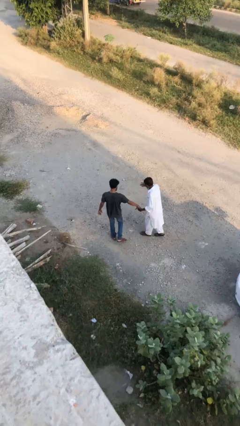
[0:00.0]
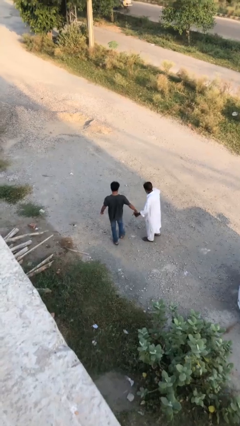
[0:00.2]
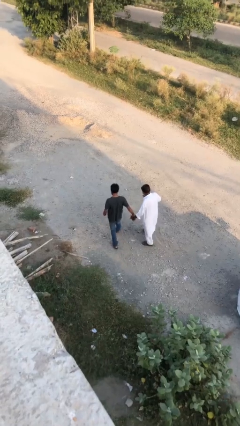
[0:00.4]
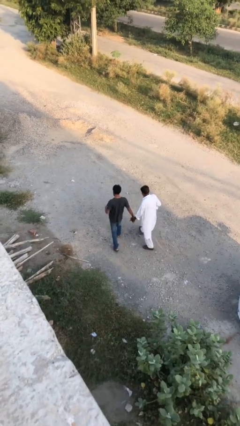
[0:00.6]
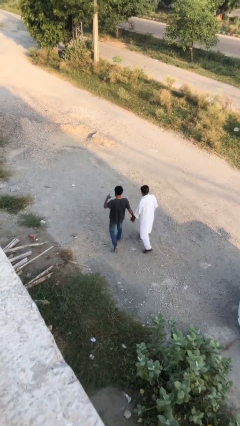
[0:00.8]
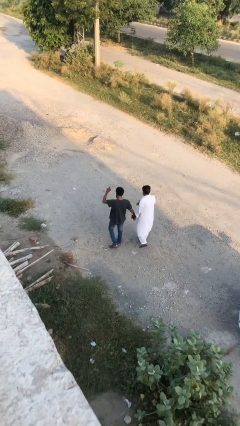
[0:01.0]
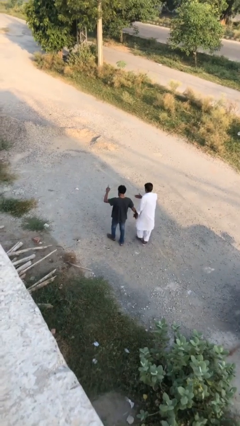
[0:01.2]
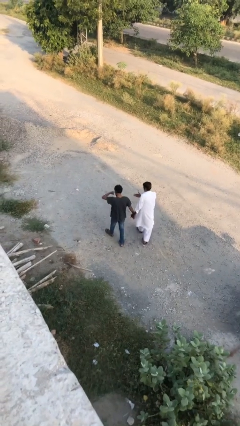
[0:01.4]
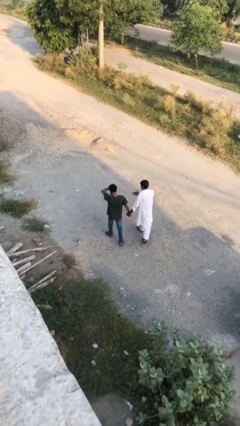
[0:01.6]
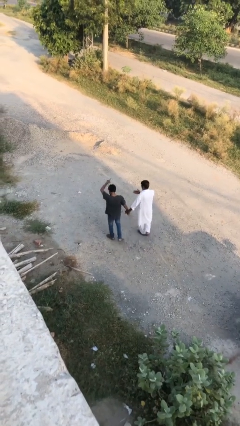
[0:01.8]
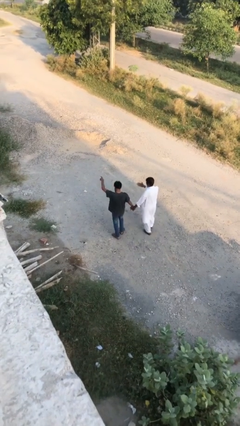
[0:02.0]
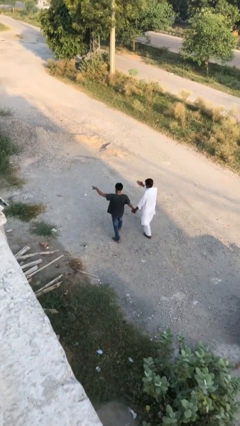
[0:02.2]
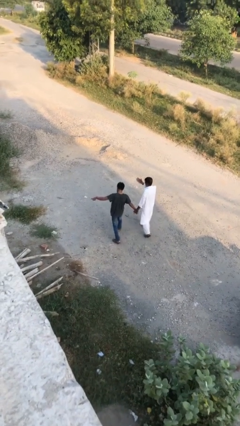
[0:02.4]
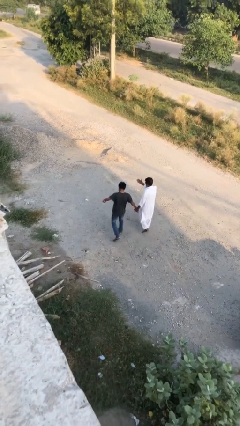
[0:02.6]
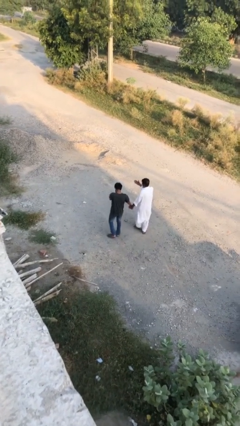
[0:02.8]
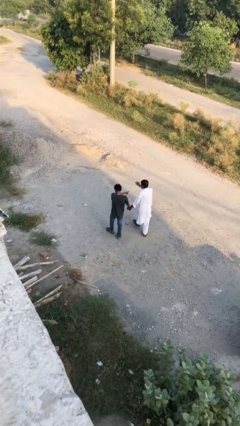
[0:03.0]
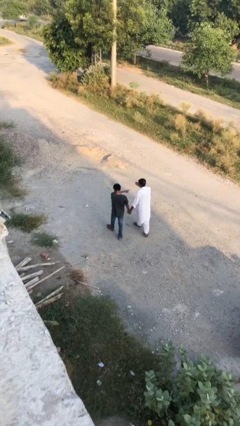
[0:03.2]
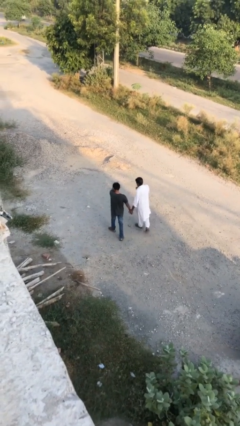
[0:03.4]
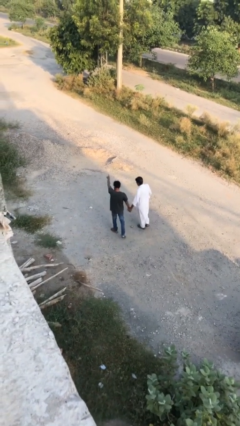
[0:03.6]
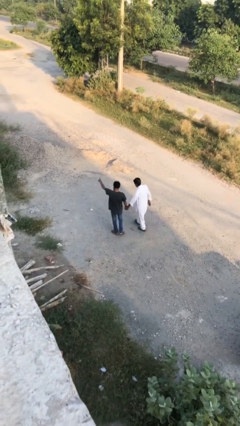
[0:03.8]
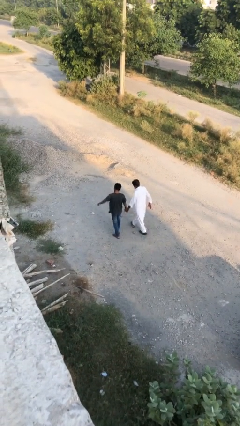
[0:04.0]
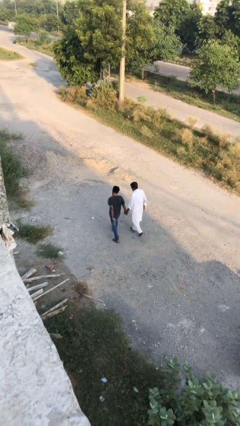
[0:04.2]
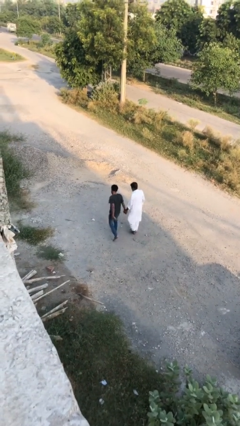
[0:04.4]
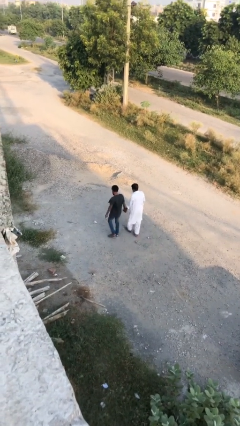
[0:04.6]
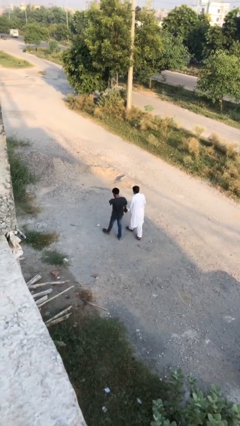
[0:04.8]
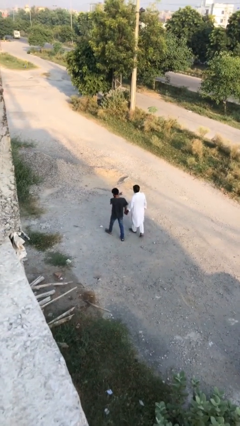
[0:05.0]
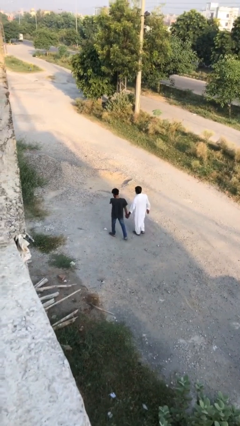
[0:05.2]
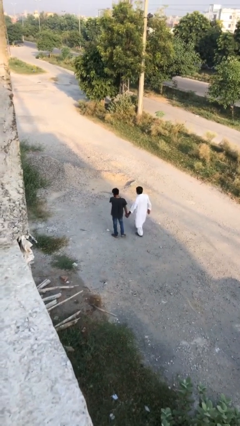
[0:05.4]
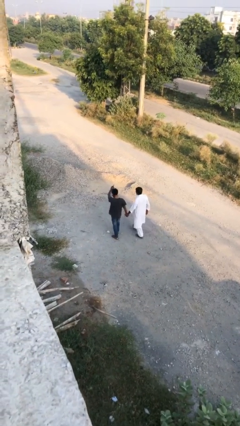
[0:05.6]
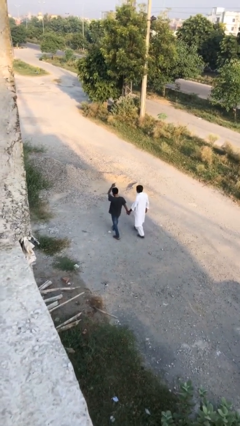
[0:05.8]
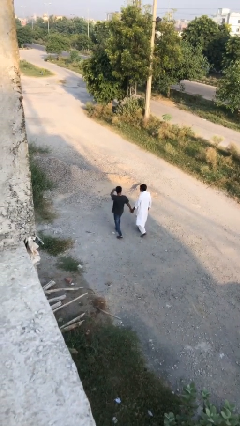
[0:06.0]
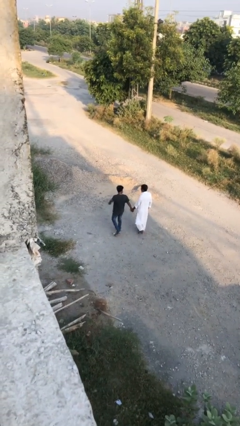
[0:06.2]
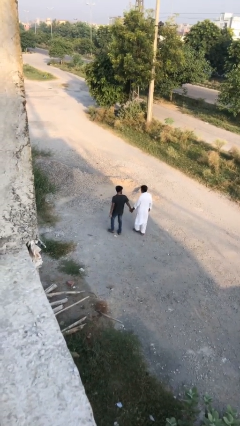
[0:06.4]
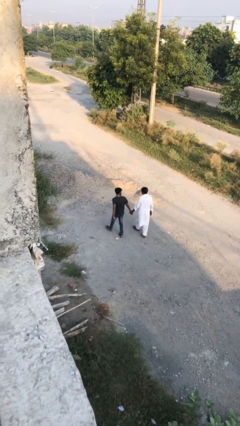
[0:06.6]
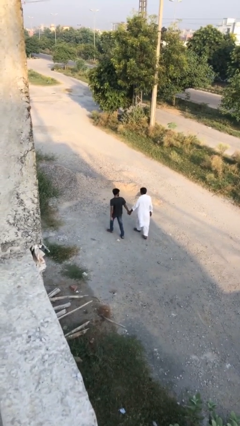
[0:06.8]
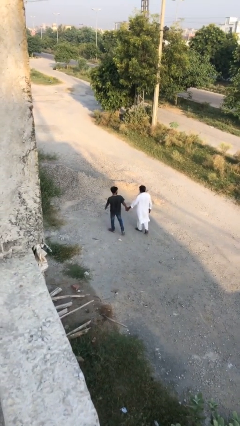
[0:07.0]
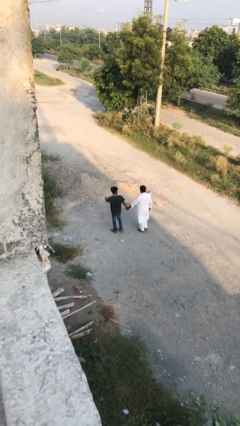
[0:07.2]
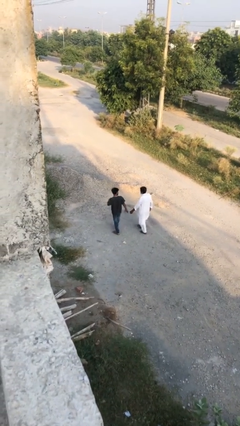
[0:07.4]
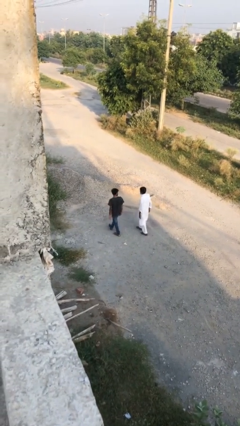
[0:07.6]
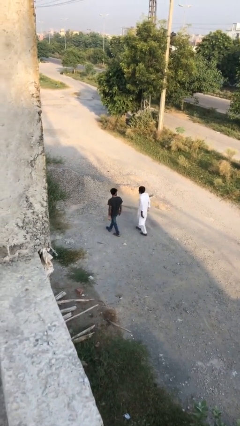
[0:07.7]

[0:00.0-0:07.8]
person holds hand

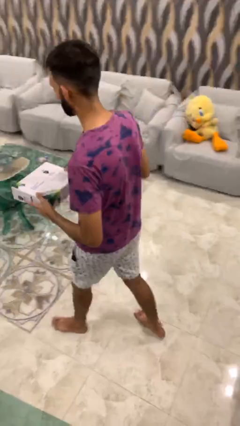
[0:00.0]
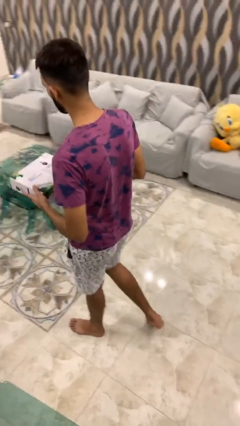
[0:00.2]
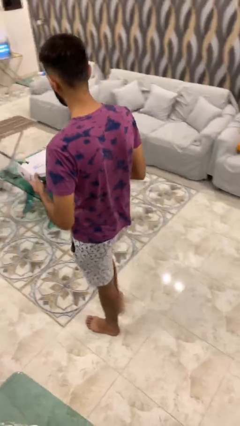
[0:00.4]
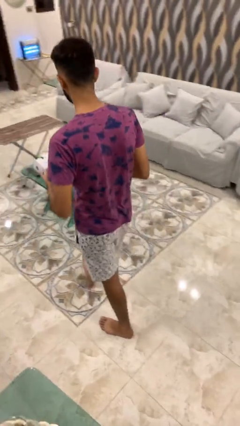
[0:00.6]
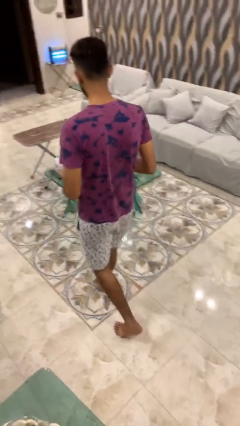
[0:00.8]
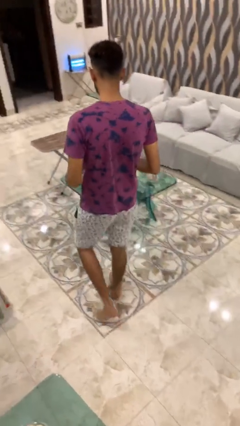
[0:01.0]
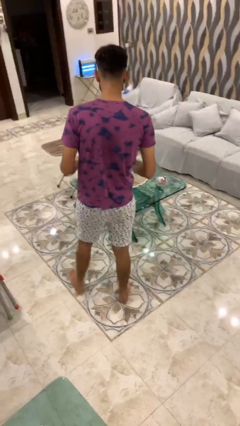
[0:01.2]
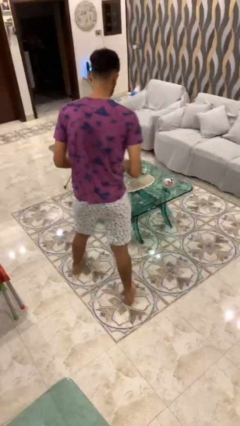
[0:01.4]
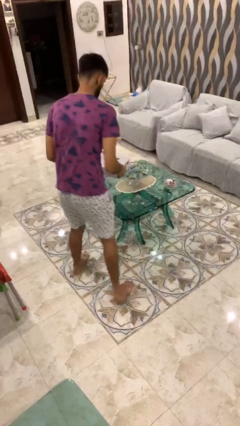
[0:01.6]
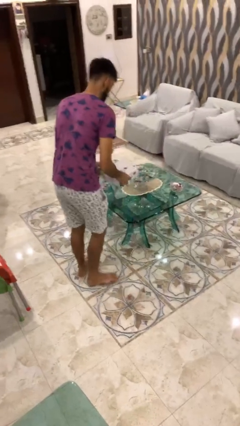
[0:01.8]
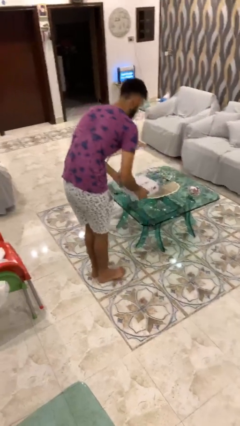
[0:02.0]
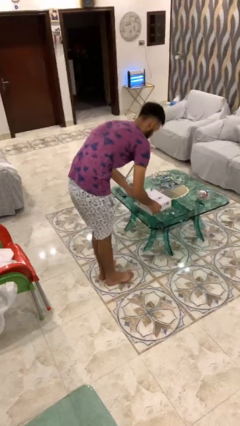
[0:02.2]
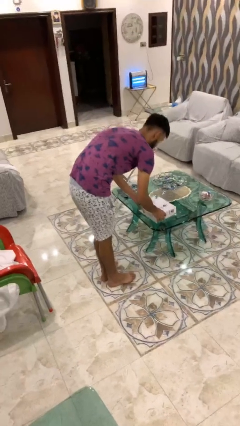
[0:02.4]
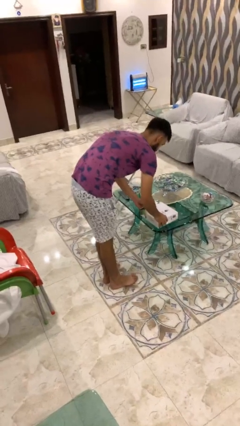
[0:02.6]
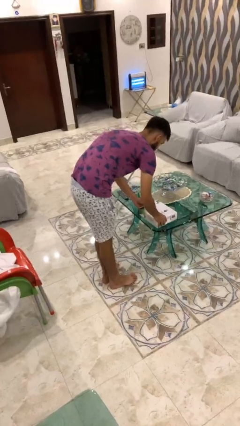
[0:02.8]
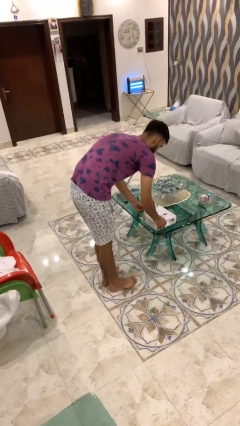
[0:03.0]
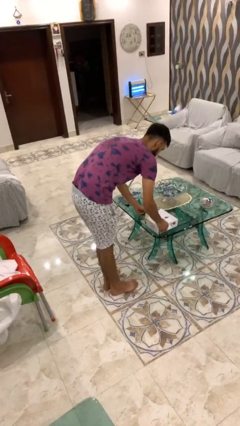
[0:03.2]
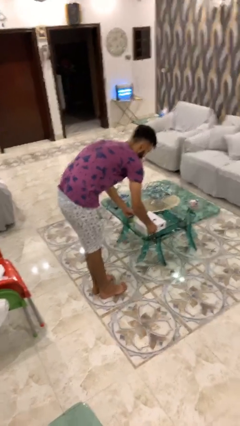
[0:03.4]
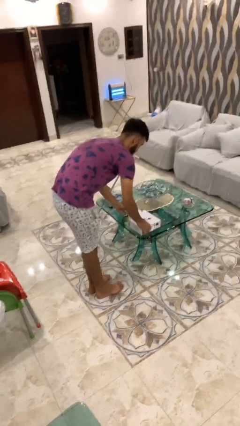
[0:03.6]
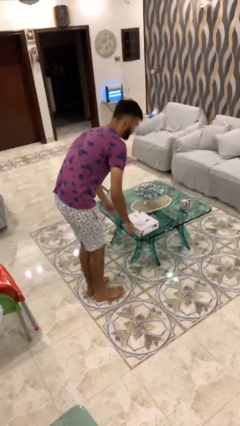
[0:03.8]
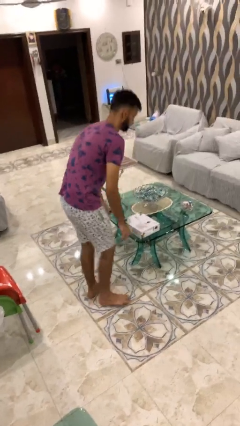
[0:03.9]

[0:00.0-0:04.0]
person puts down object on table

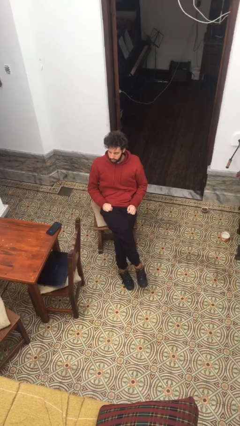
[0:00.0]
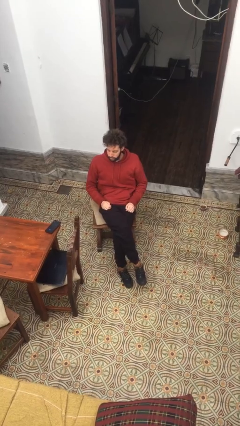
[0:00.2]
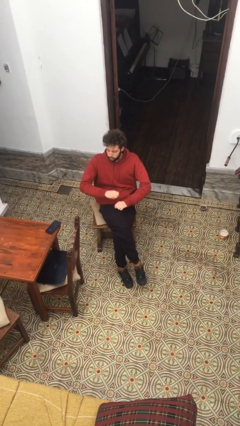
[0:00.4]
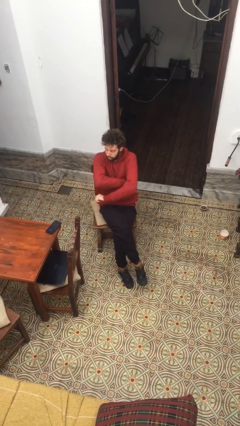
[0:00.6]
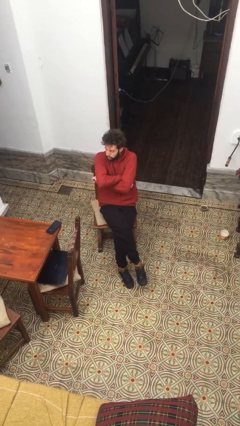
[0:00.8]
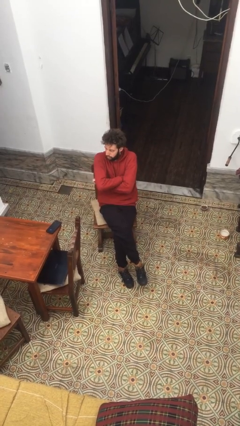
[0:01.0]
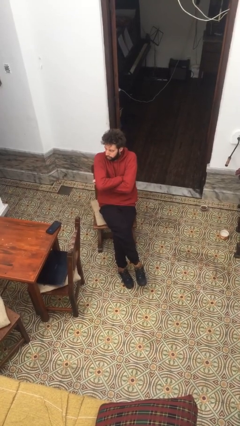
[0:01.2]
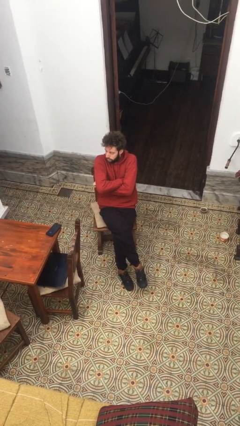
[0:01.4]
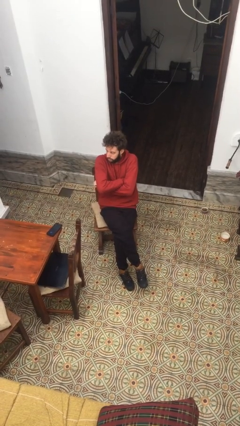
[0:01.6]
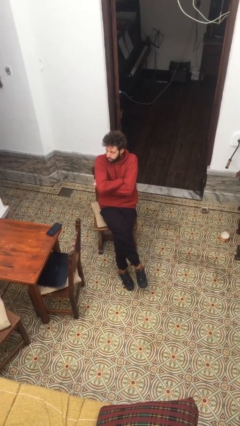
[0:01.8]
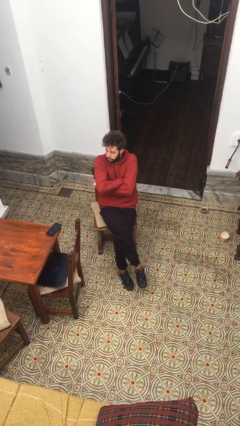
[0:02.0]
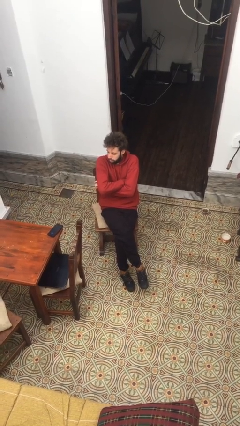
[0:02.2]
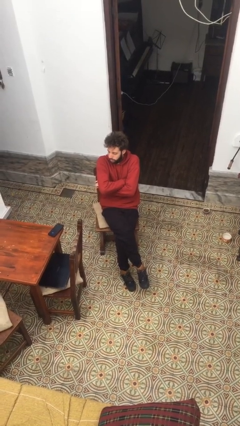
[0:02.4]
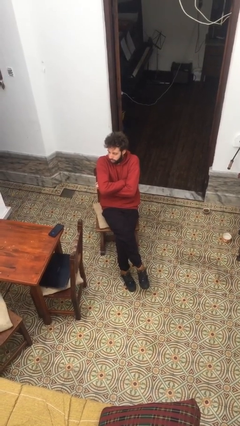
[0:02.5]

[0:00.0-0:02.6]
person crosses arms

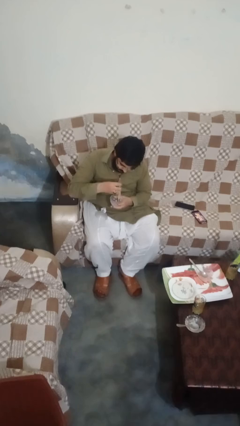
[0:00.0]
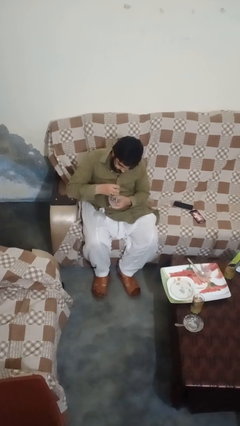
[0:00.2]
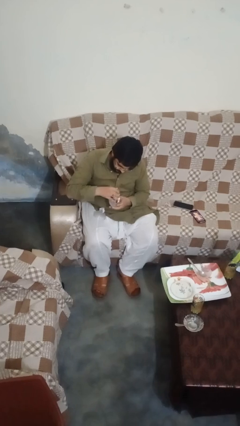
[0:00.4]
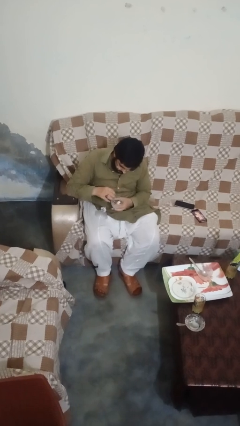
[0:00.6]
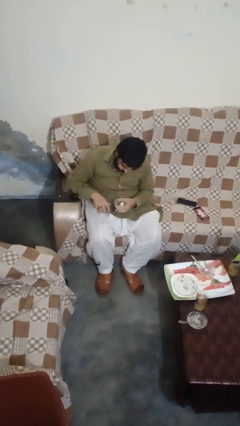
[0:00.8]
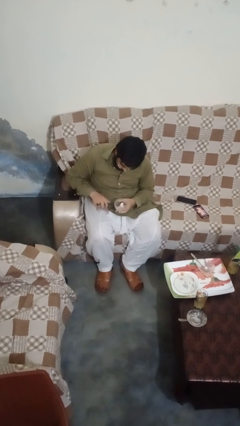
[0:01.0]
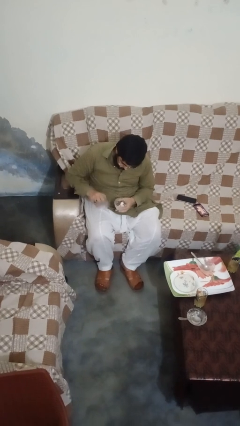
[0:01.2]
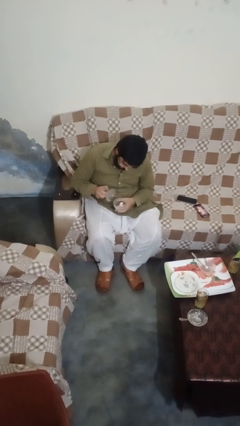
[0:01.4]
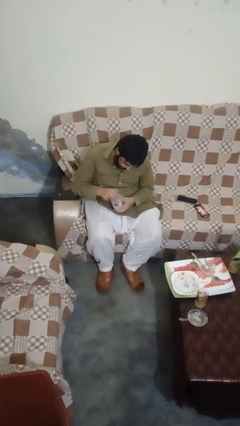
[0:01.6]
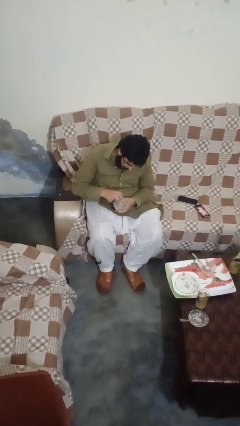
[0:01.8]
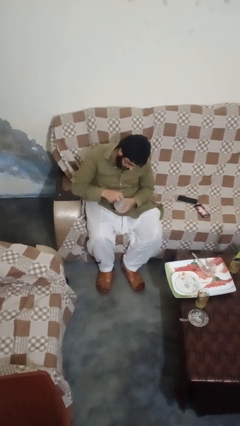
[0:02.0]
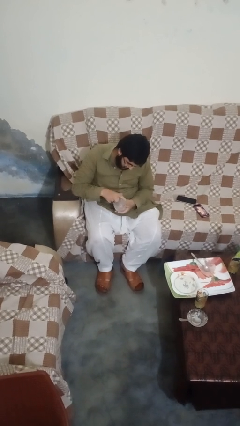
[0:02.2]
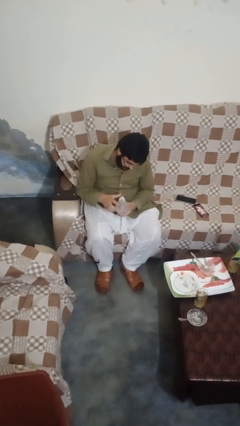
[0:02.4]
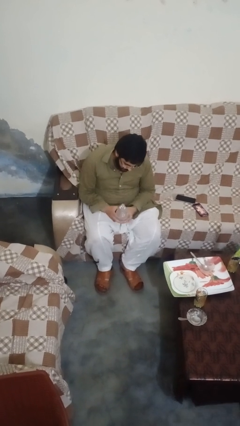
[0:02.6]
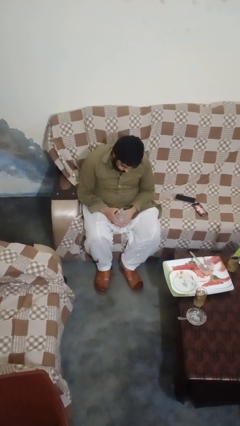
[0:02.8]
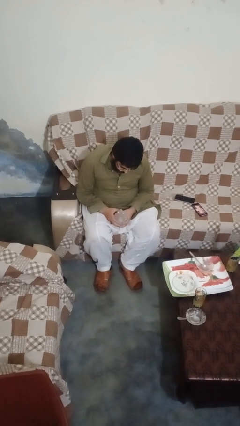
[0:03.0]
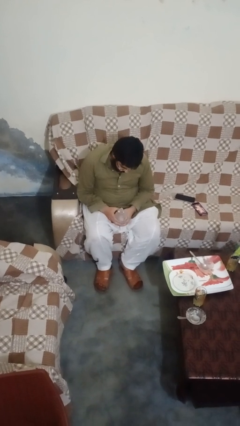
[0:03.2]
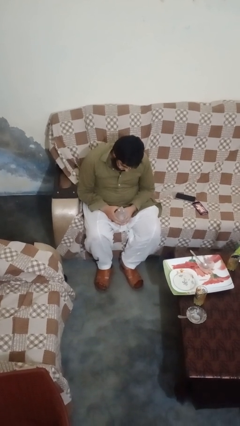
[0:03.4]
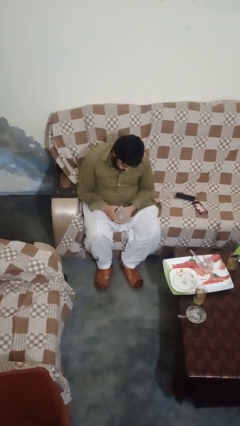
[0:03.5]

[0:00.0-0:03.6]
person closes jewelry box
